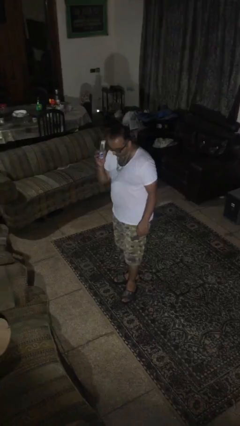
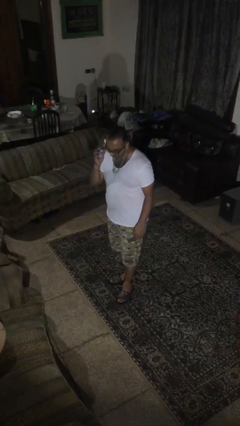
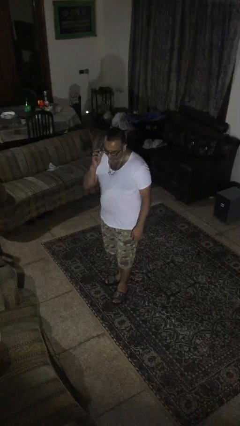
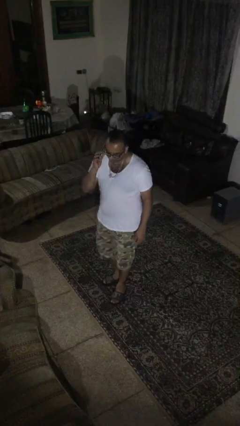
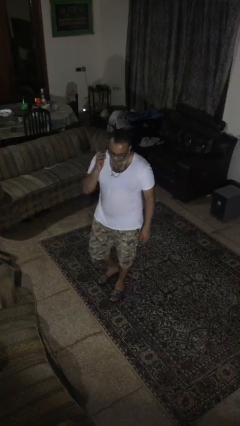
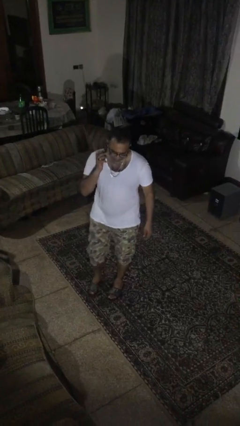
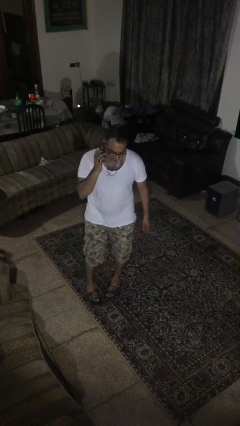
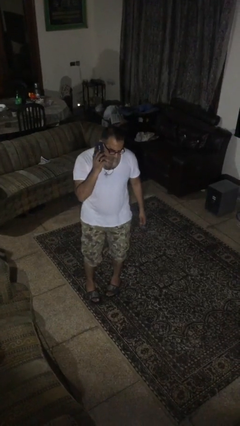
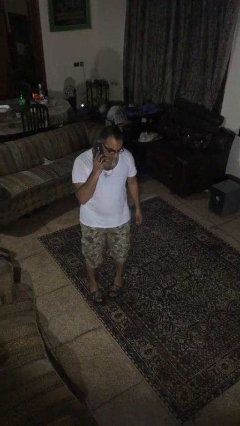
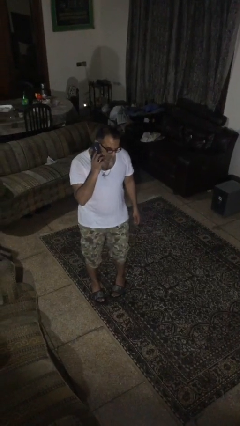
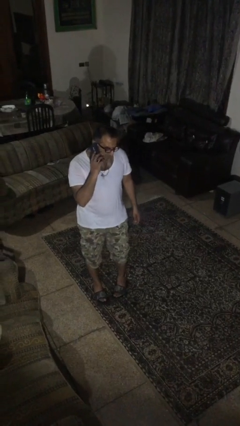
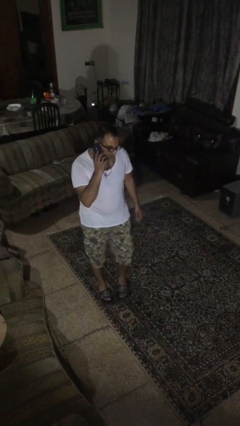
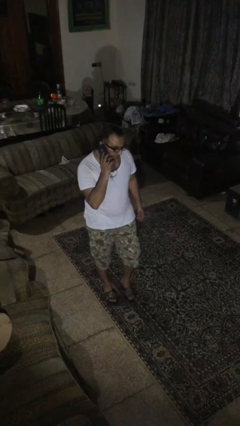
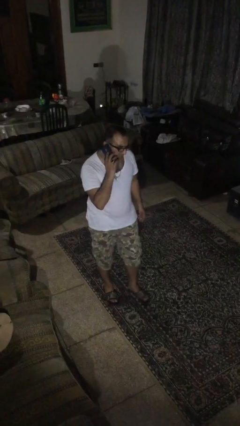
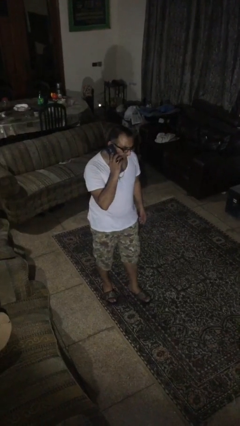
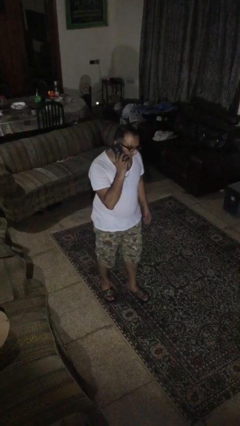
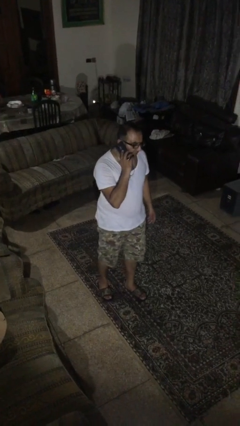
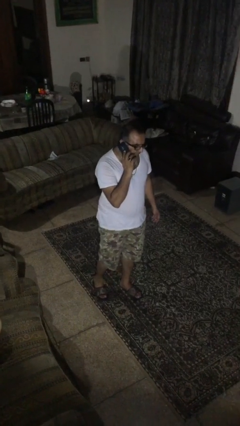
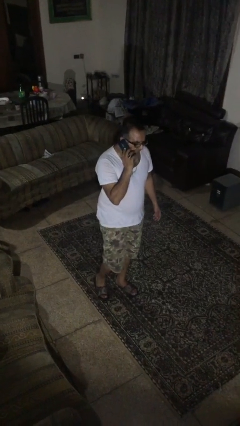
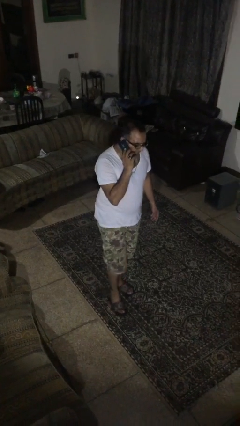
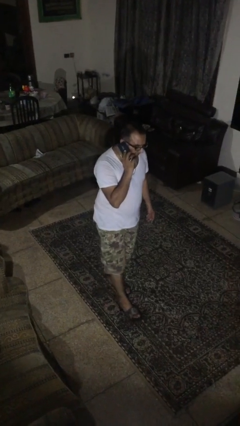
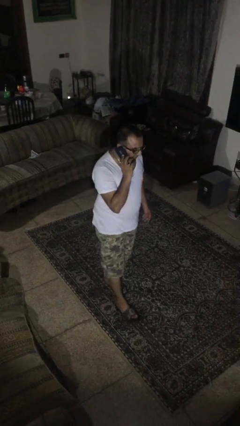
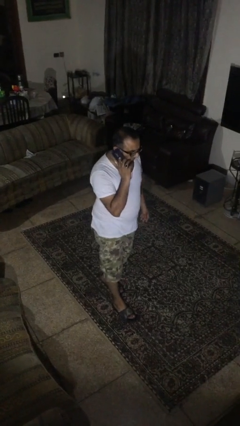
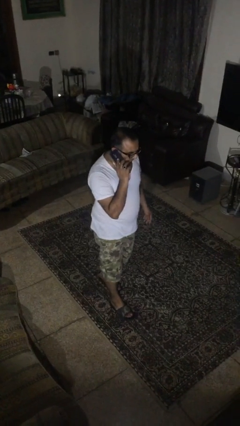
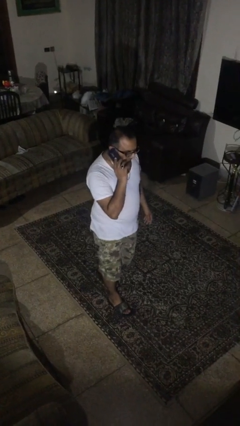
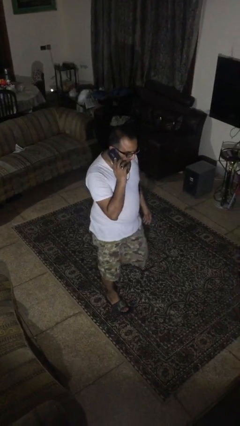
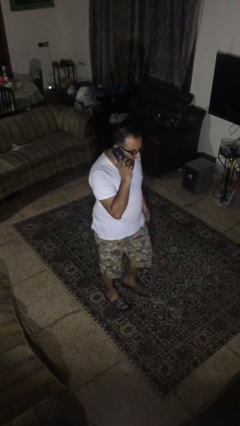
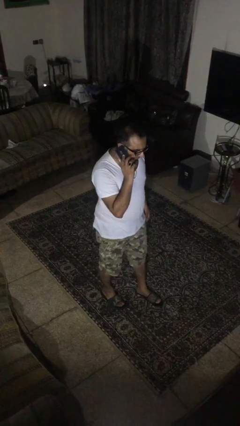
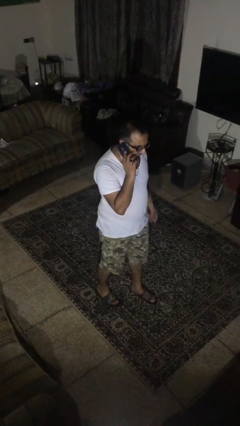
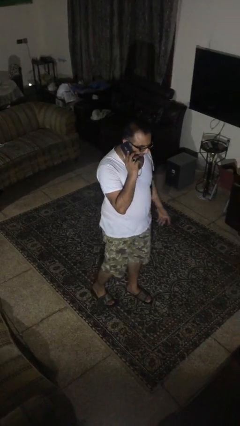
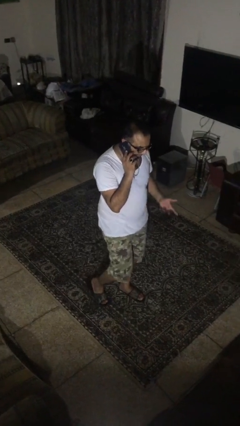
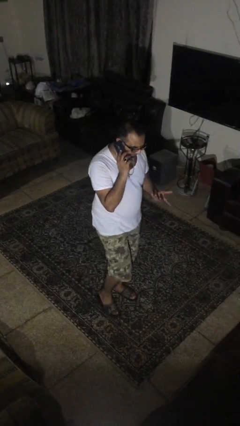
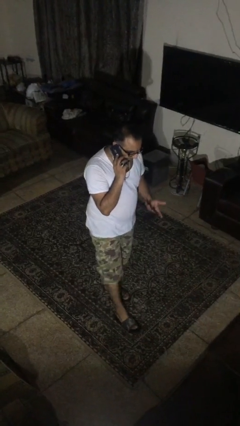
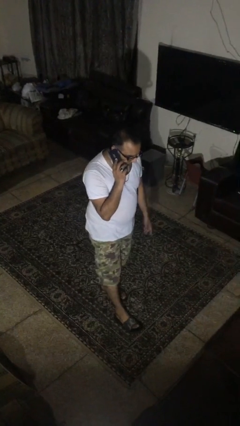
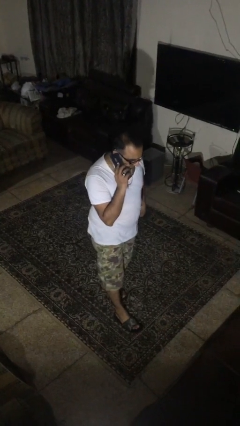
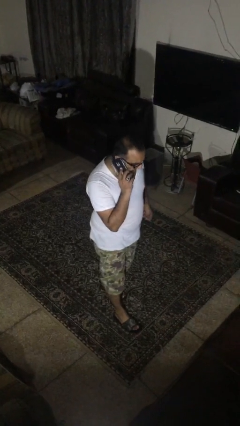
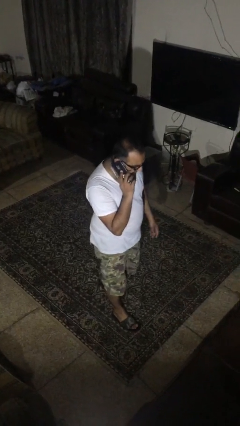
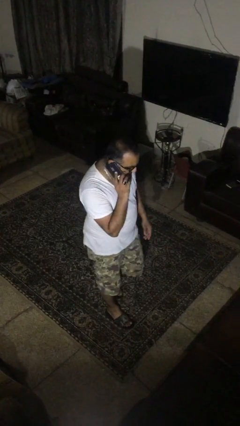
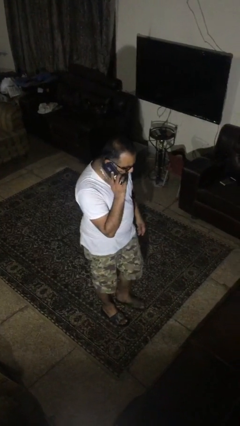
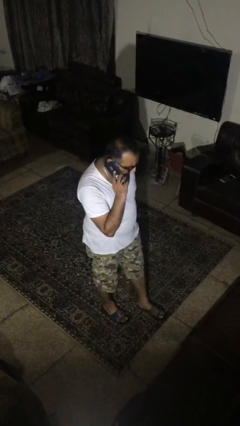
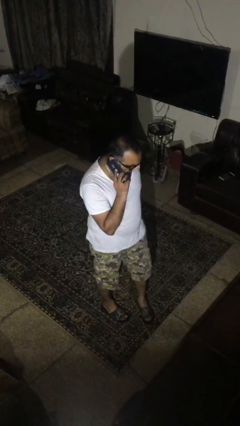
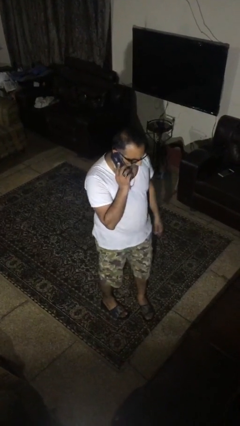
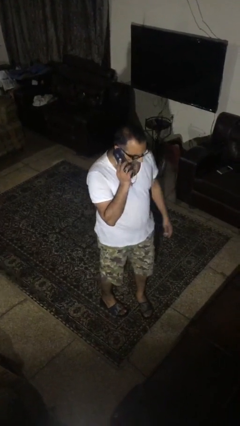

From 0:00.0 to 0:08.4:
person talks on phone

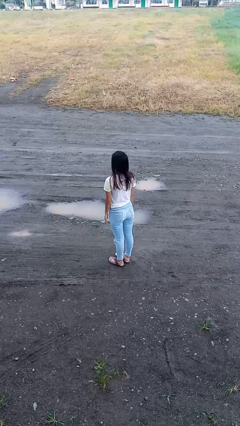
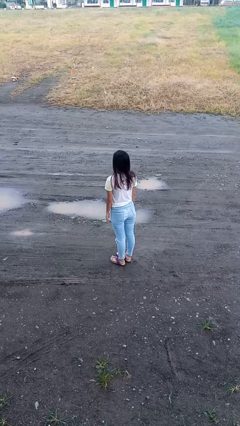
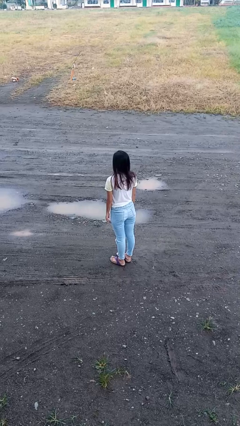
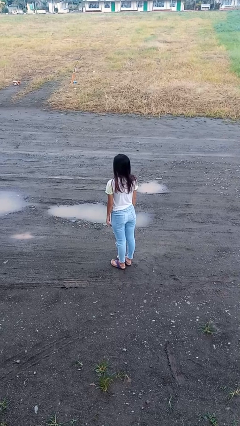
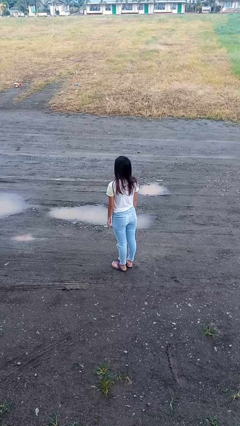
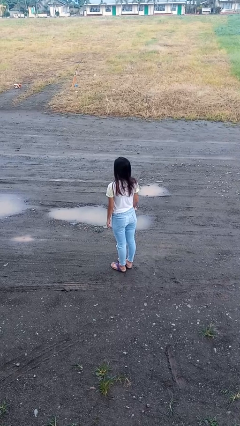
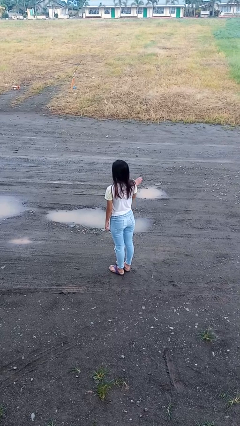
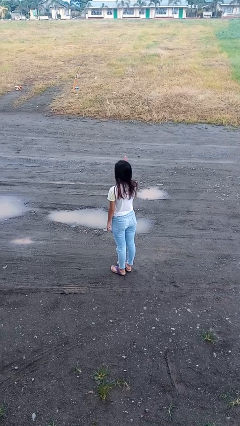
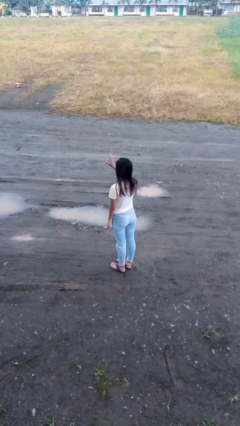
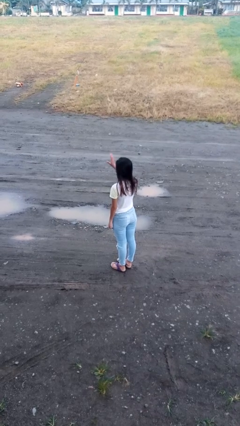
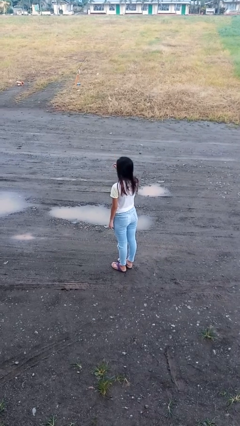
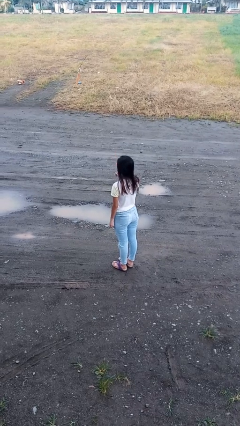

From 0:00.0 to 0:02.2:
person gestures swipe left

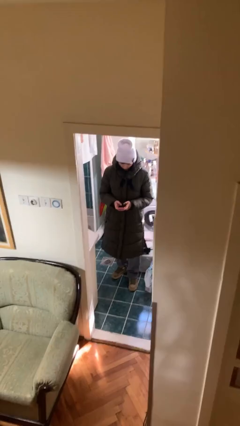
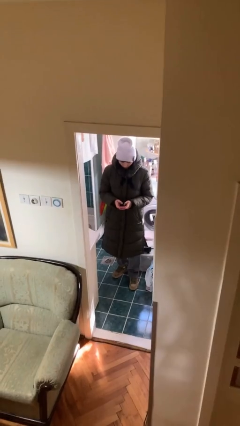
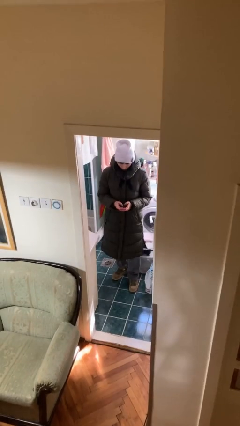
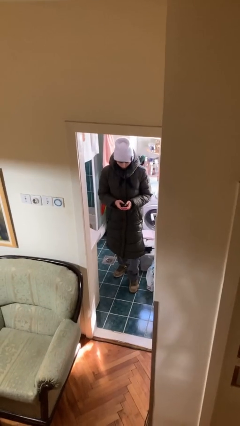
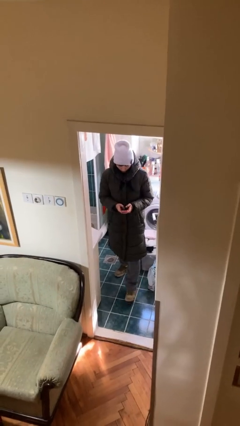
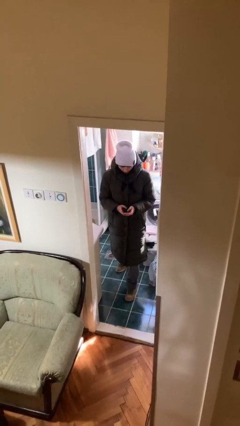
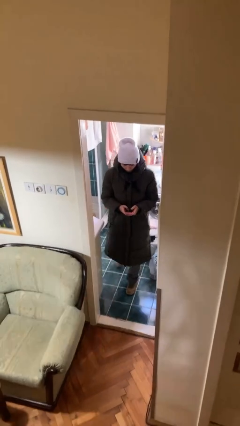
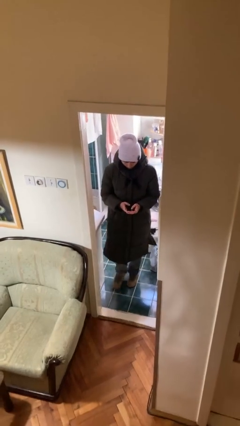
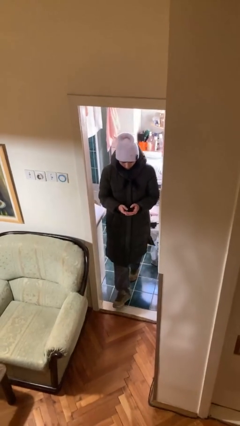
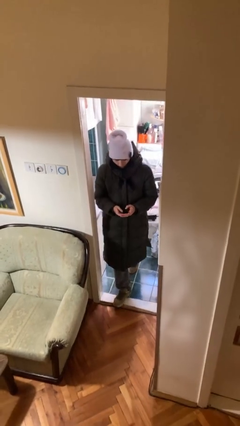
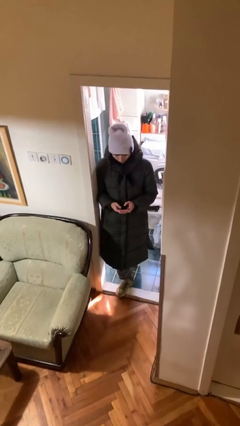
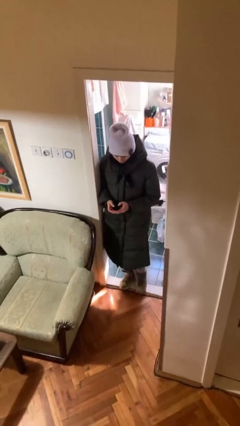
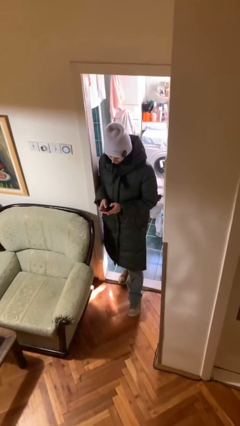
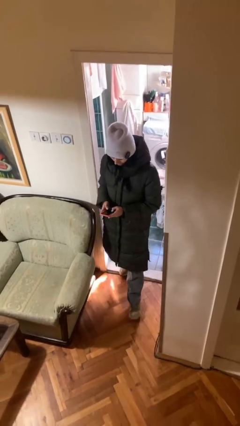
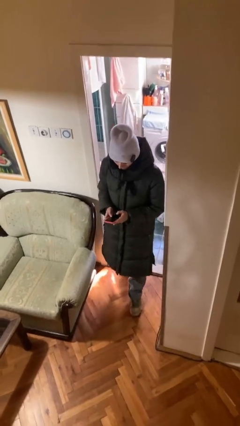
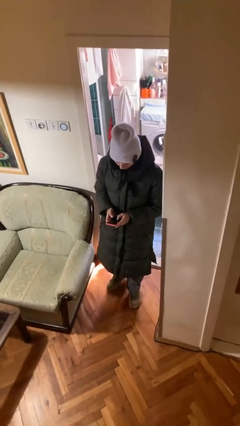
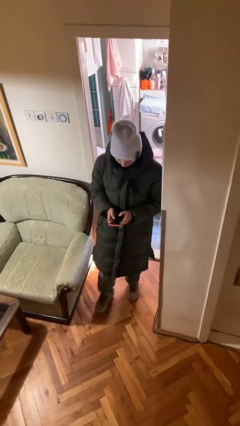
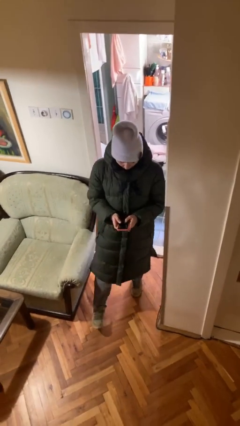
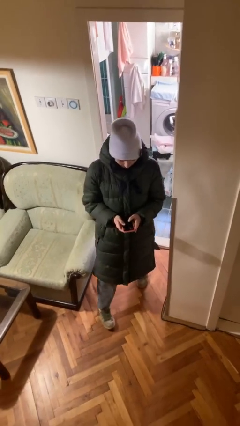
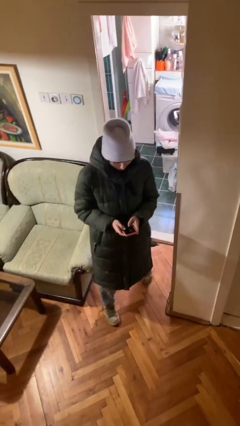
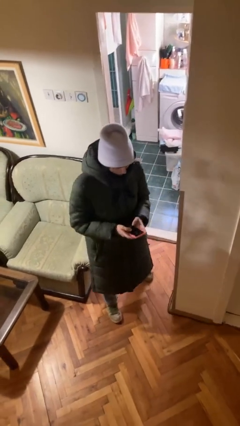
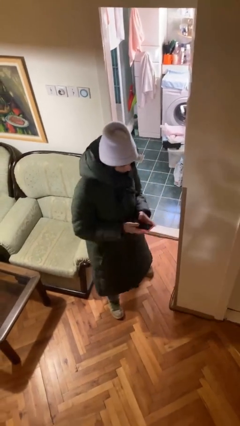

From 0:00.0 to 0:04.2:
person enters scene through structure

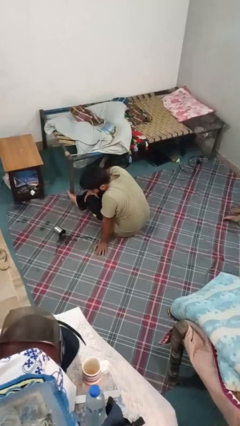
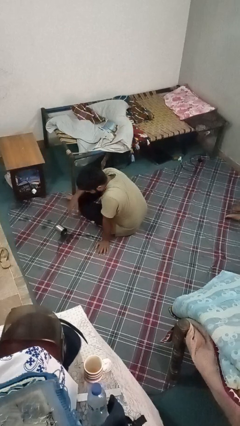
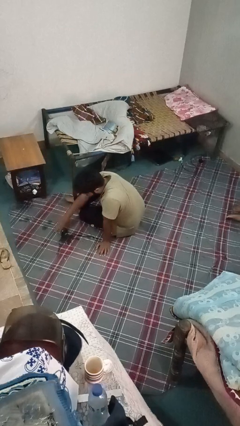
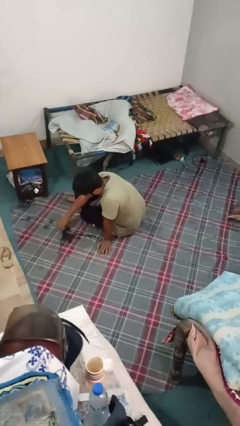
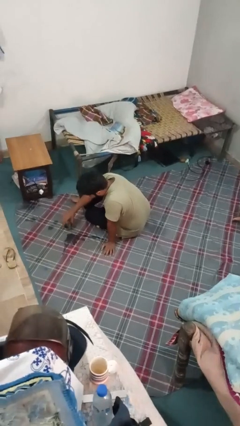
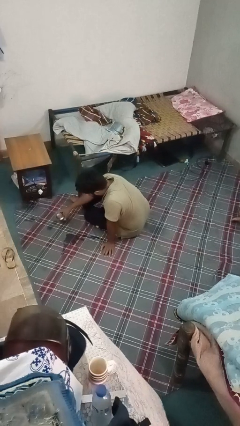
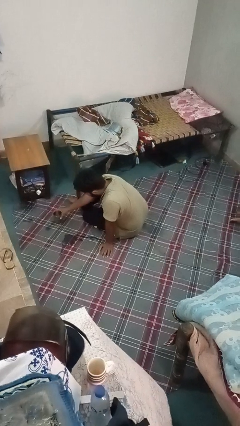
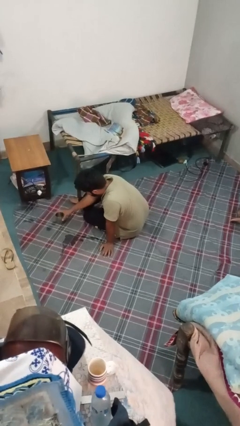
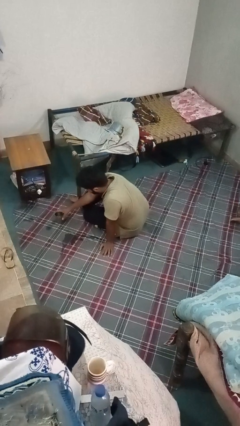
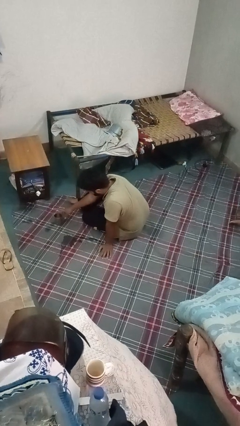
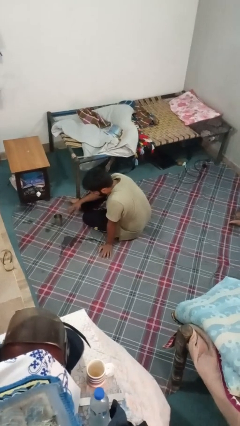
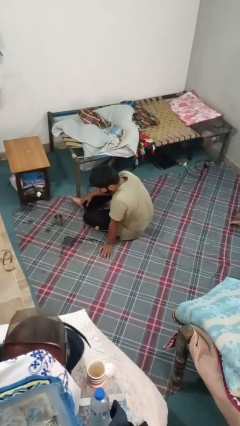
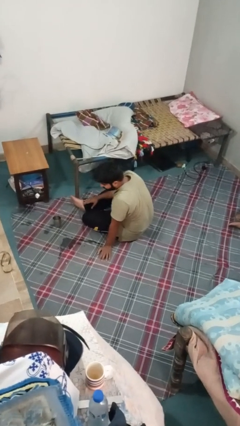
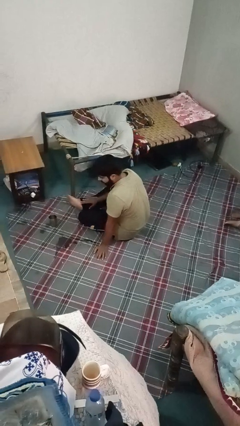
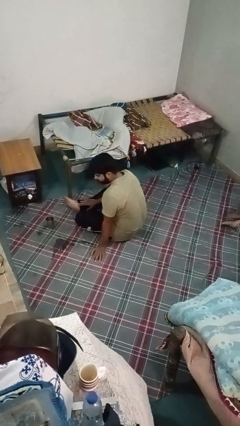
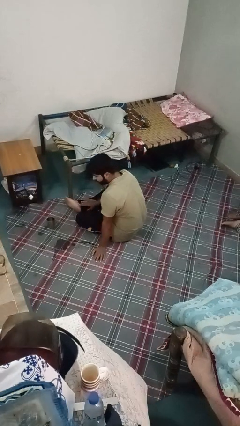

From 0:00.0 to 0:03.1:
person sets upright glass
